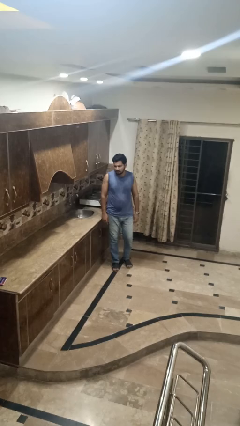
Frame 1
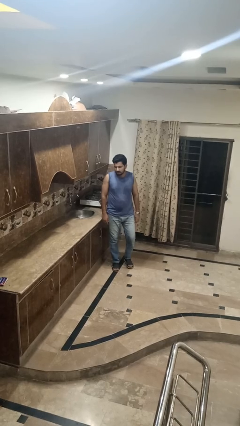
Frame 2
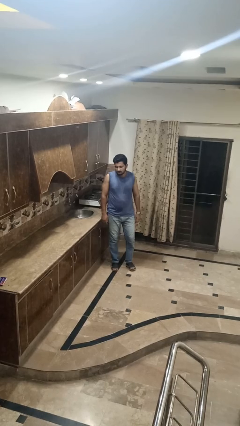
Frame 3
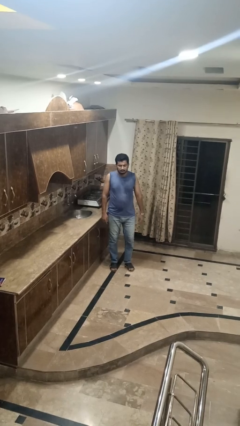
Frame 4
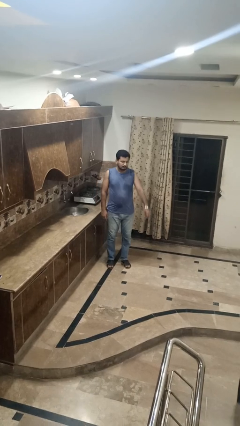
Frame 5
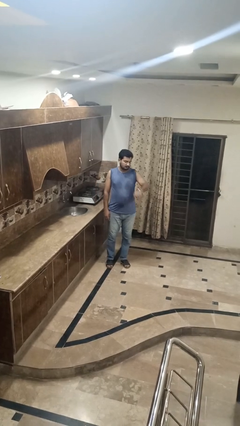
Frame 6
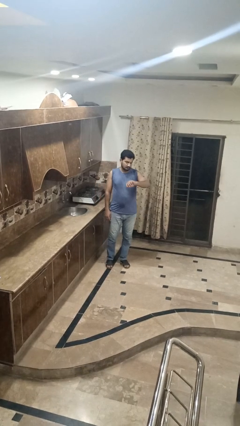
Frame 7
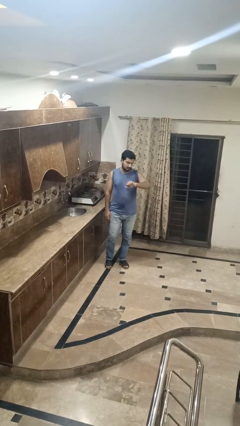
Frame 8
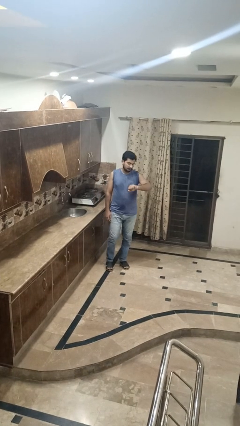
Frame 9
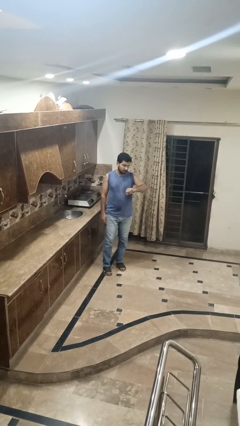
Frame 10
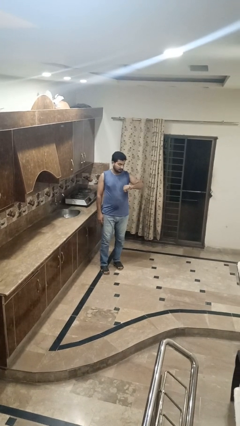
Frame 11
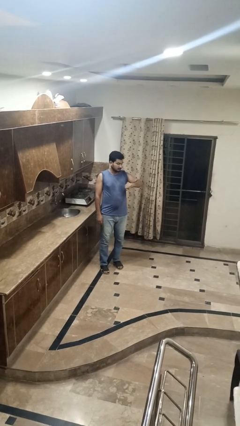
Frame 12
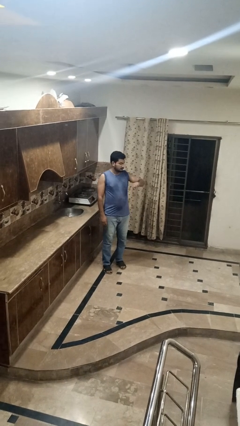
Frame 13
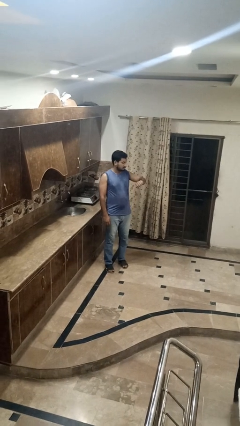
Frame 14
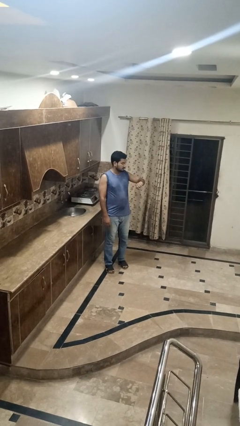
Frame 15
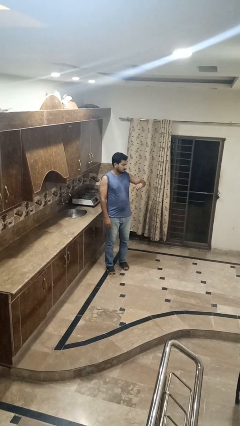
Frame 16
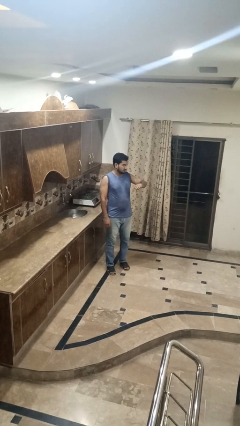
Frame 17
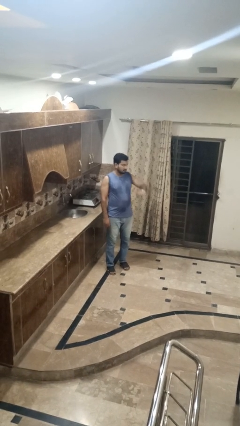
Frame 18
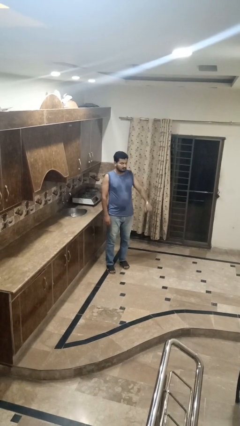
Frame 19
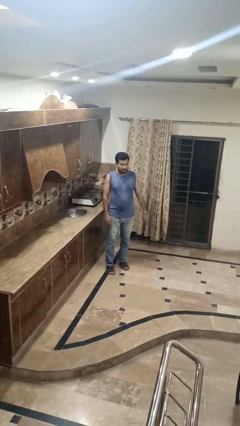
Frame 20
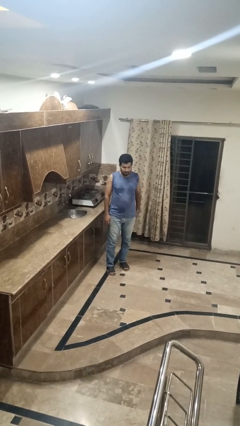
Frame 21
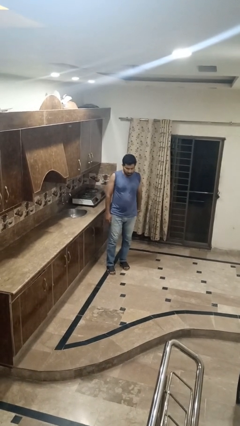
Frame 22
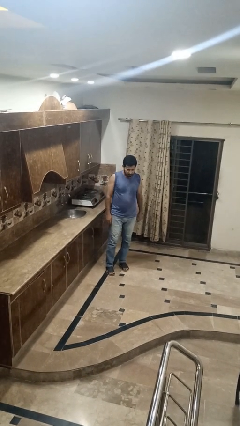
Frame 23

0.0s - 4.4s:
person looks at wristwatch

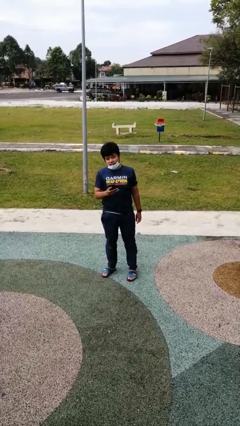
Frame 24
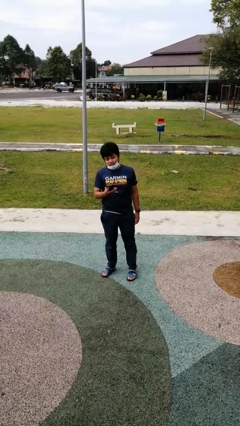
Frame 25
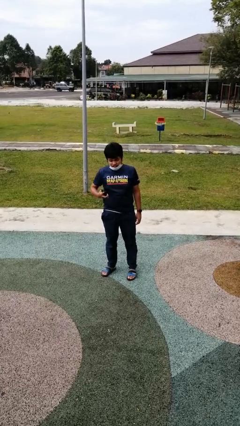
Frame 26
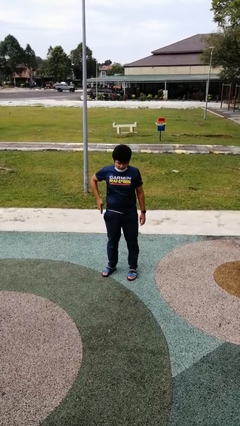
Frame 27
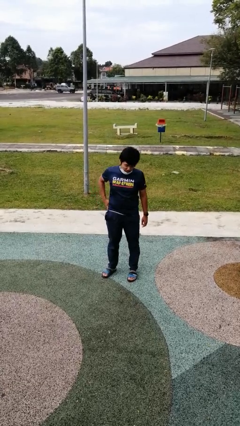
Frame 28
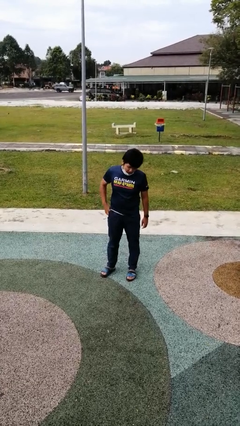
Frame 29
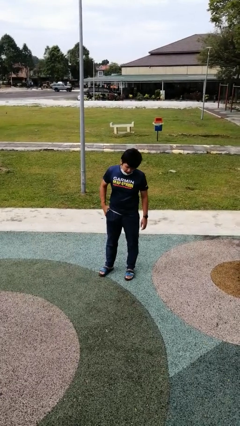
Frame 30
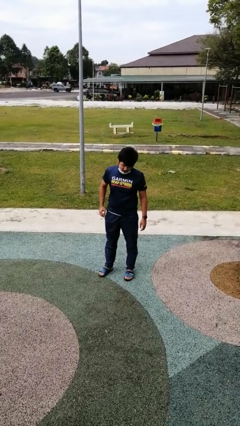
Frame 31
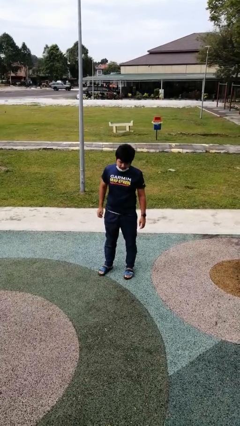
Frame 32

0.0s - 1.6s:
person puts phone into pocket

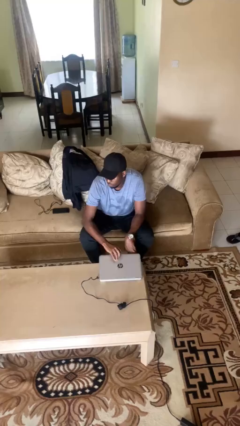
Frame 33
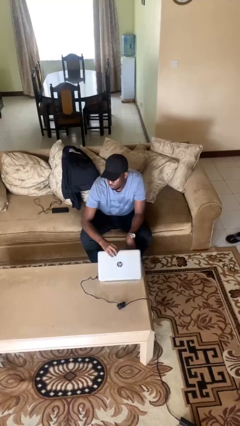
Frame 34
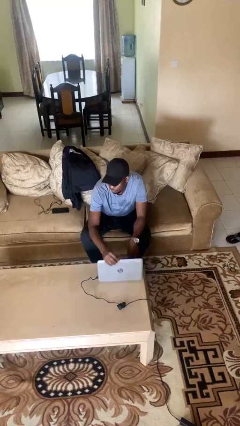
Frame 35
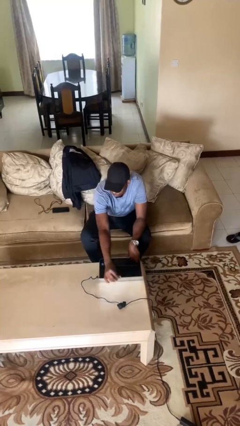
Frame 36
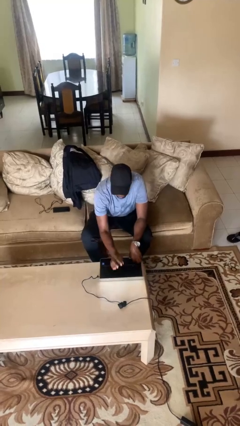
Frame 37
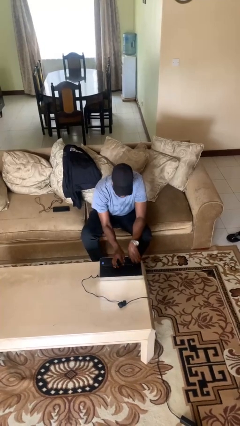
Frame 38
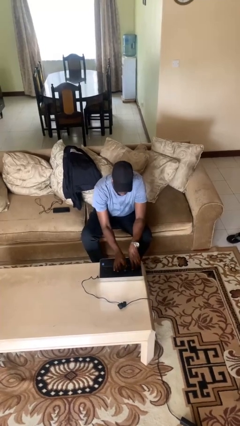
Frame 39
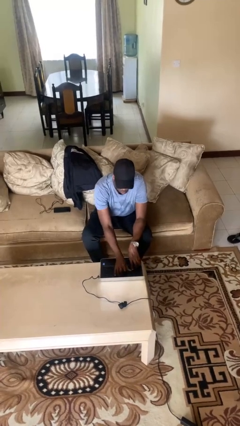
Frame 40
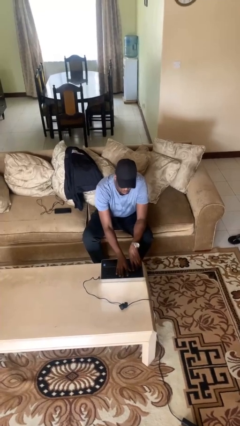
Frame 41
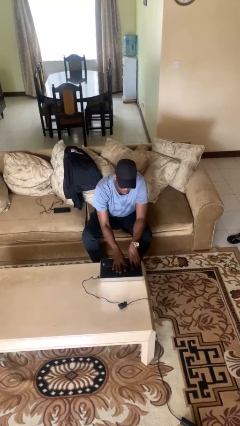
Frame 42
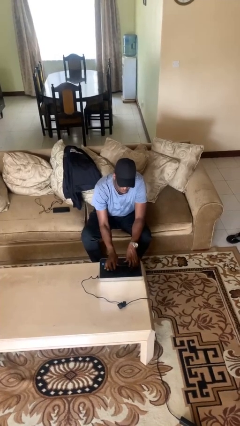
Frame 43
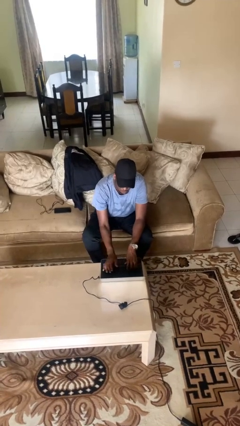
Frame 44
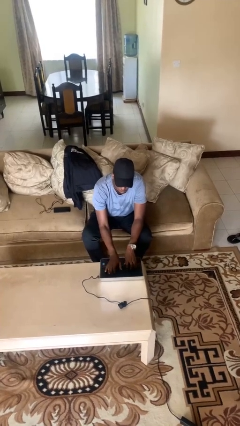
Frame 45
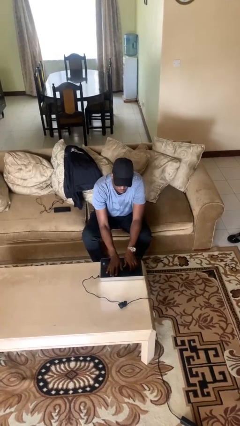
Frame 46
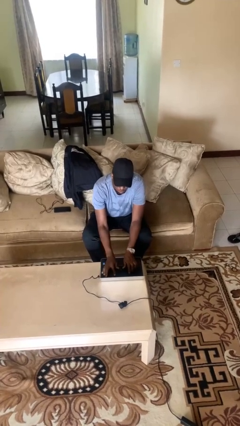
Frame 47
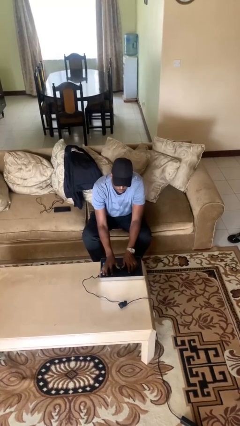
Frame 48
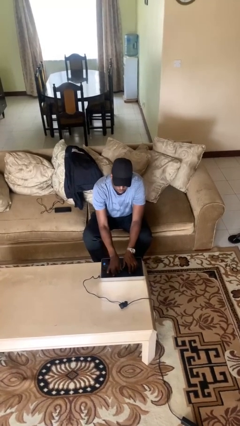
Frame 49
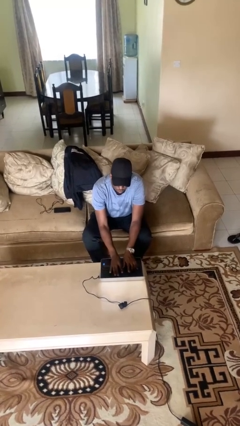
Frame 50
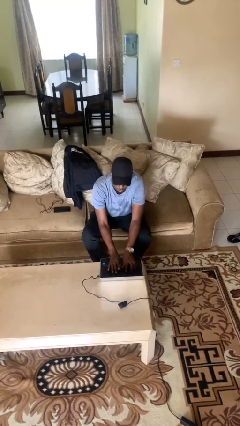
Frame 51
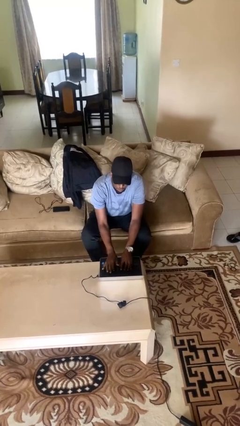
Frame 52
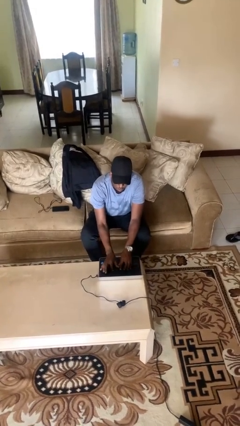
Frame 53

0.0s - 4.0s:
person interacts with laptop

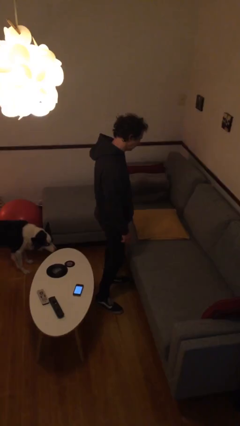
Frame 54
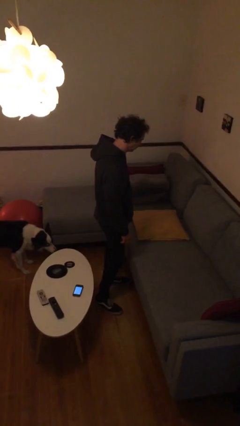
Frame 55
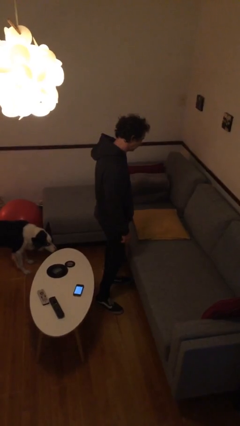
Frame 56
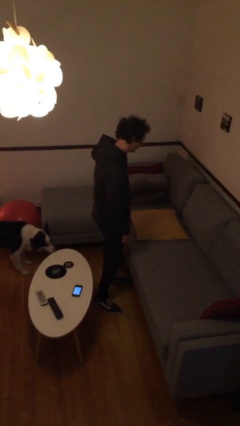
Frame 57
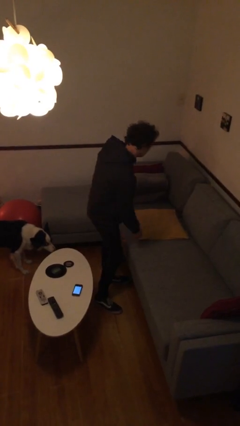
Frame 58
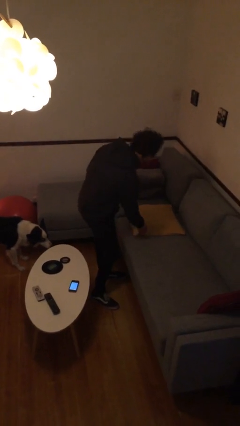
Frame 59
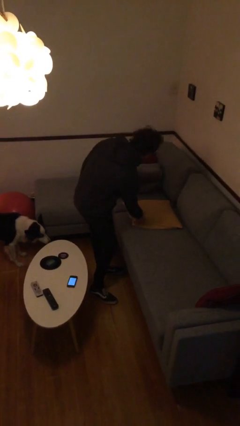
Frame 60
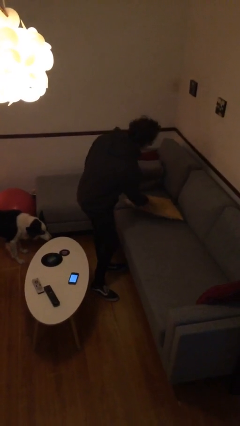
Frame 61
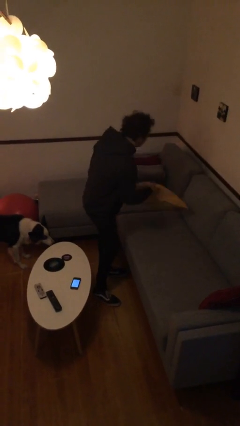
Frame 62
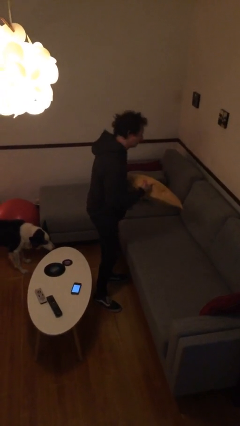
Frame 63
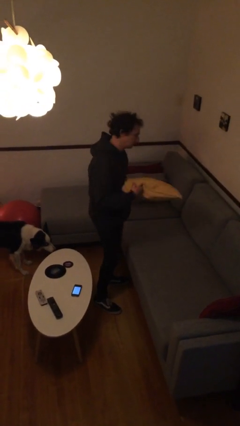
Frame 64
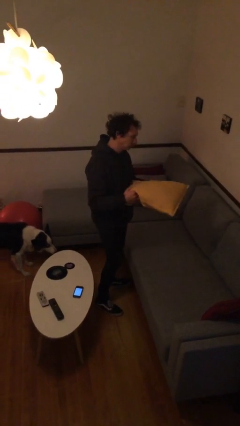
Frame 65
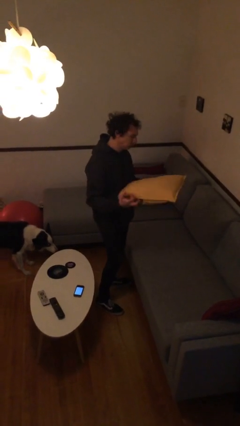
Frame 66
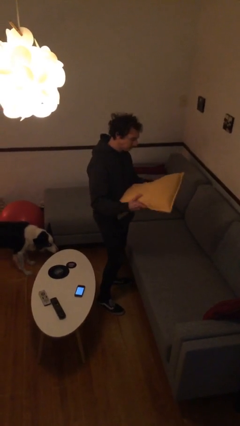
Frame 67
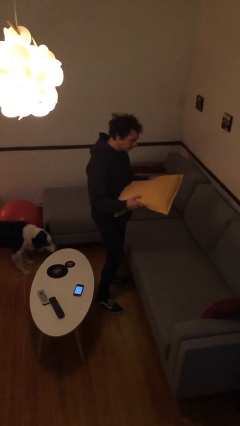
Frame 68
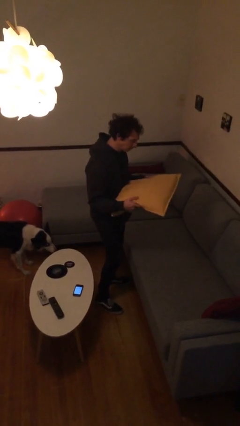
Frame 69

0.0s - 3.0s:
person picks up object from couch

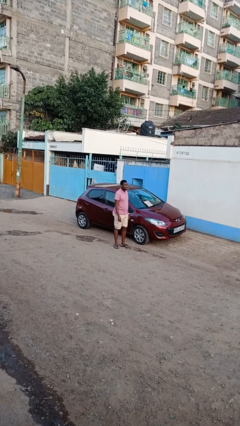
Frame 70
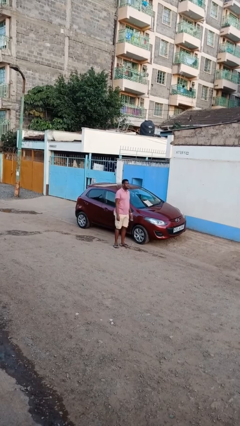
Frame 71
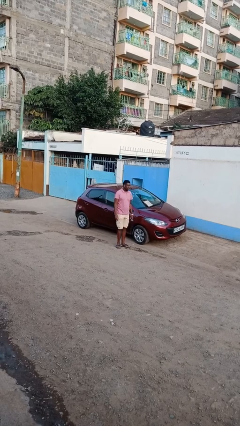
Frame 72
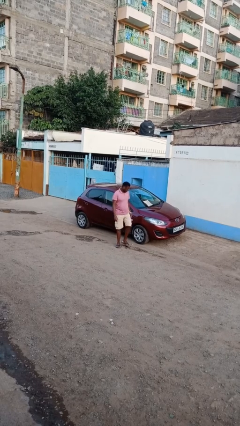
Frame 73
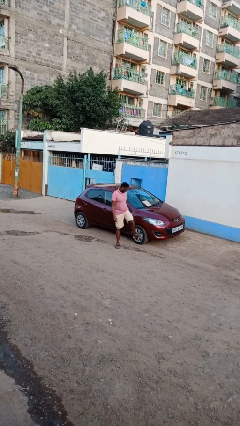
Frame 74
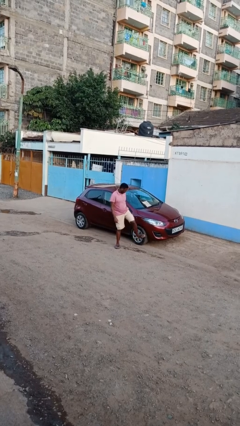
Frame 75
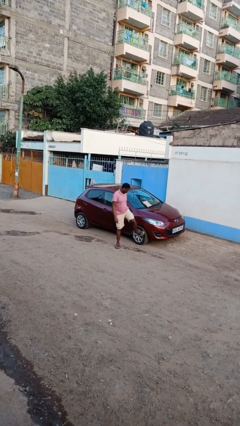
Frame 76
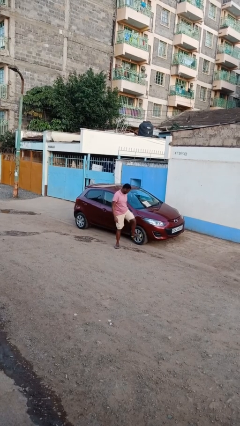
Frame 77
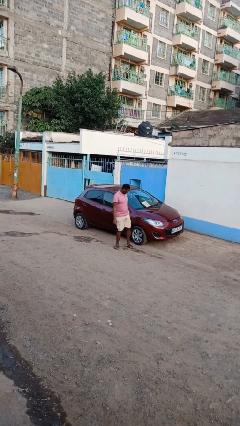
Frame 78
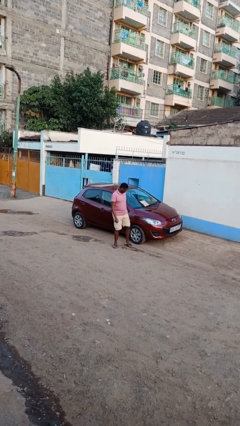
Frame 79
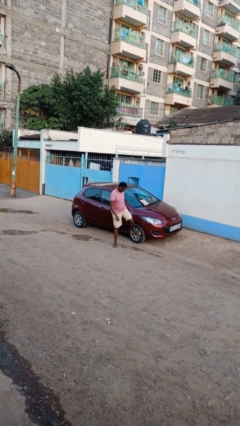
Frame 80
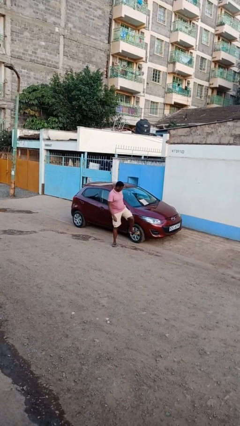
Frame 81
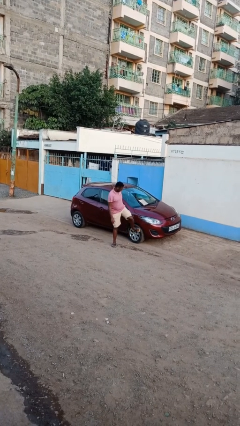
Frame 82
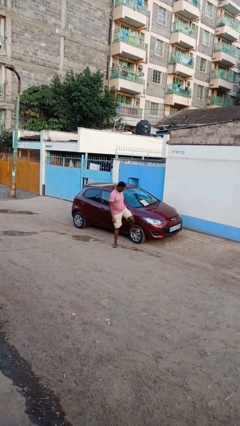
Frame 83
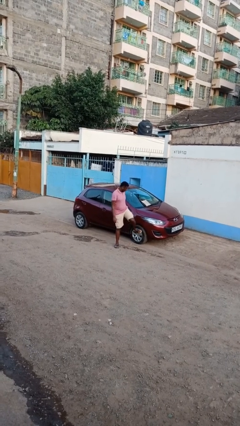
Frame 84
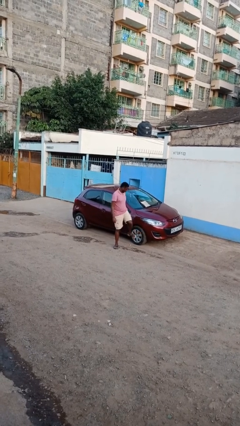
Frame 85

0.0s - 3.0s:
person kicks car tires

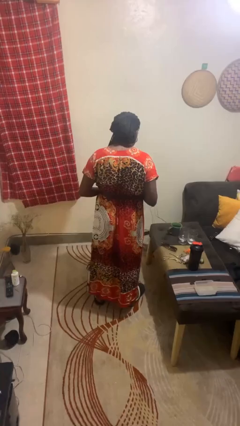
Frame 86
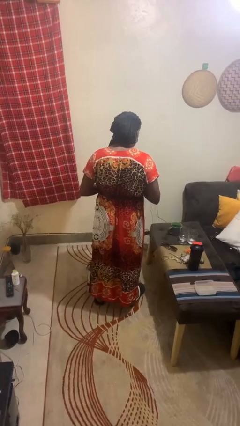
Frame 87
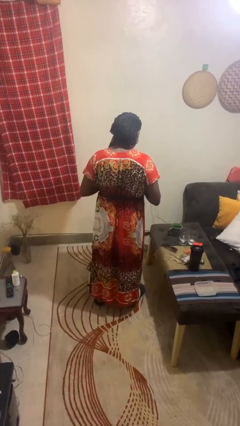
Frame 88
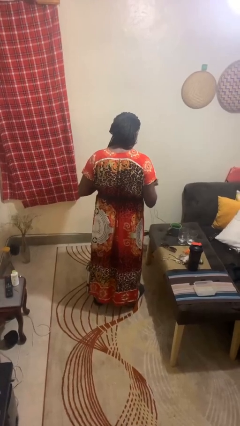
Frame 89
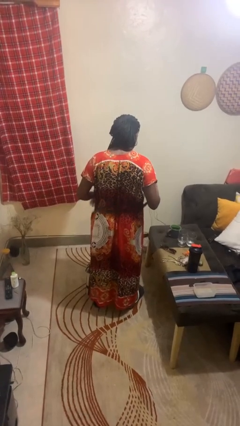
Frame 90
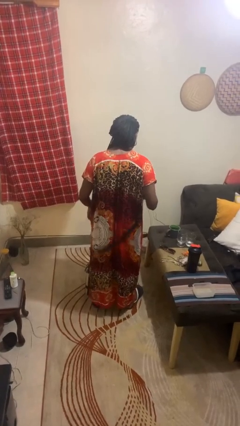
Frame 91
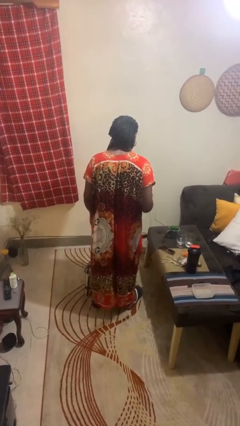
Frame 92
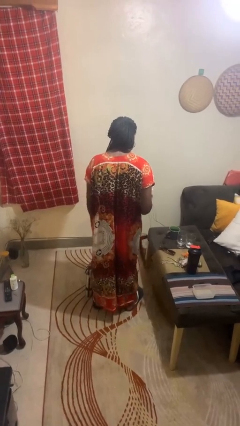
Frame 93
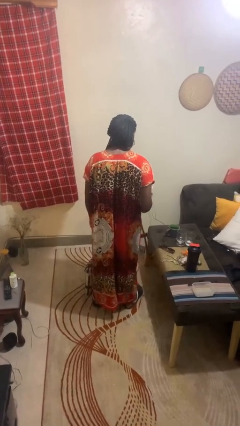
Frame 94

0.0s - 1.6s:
person takes off belt
